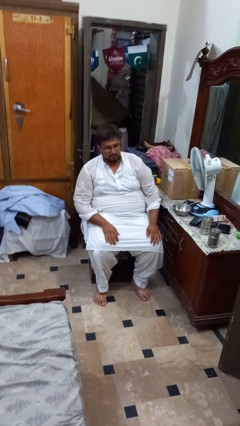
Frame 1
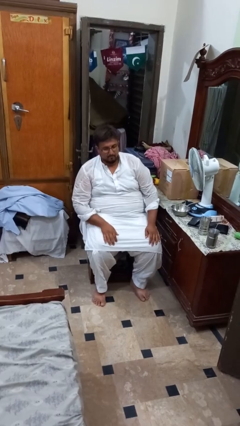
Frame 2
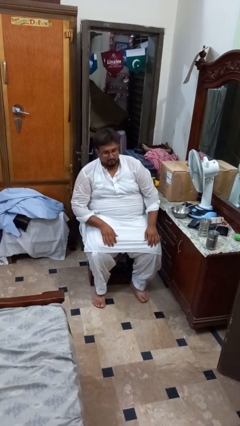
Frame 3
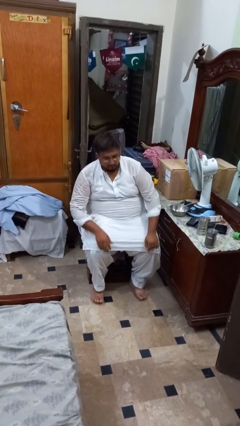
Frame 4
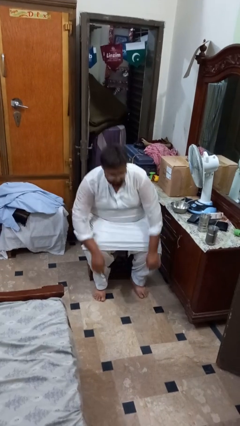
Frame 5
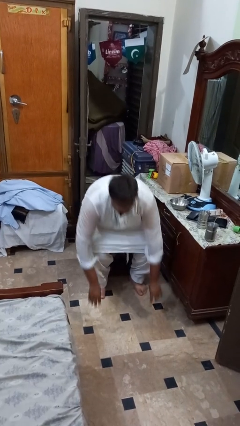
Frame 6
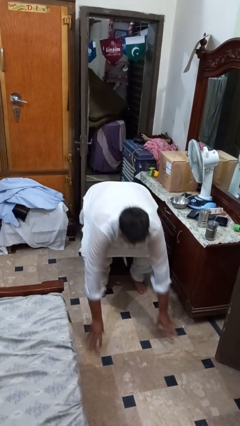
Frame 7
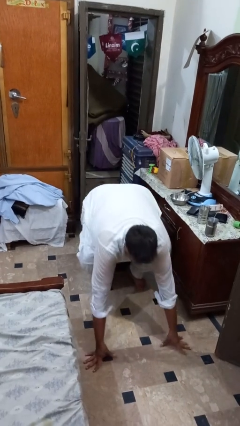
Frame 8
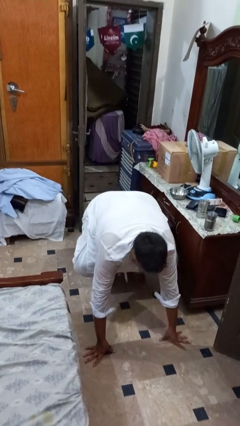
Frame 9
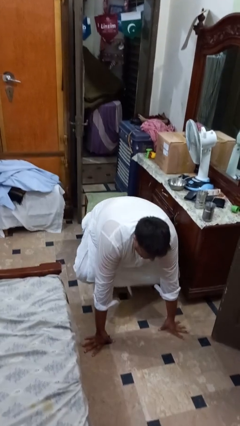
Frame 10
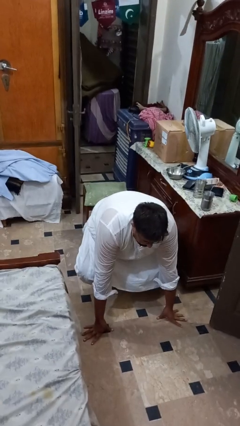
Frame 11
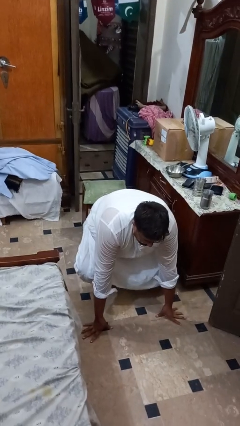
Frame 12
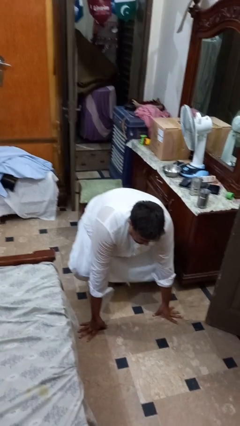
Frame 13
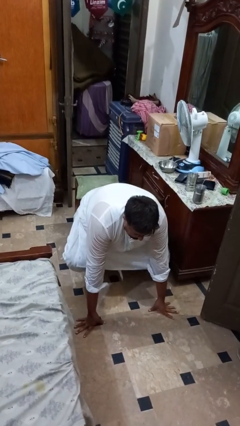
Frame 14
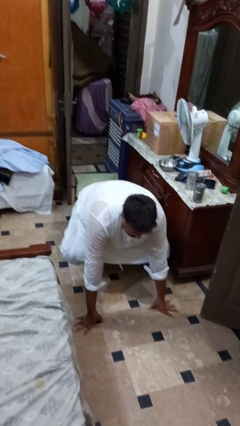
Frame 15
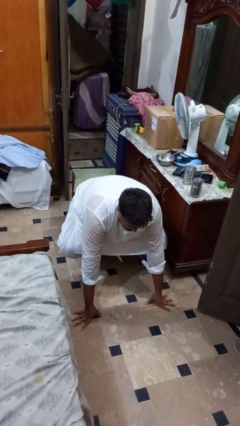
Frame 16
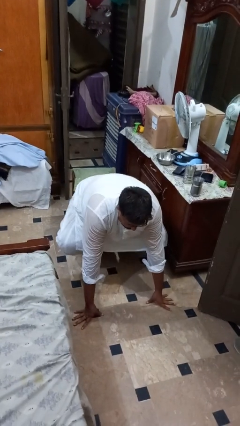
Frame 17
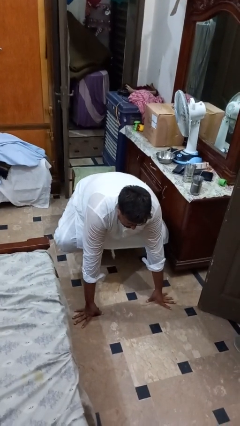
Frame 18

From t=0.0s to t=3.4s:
person falls from chair

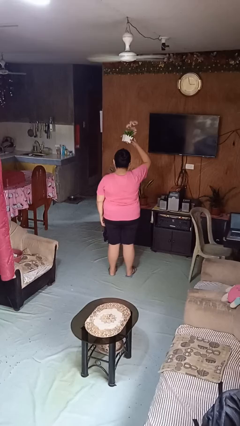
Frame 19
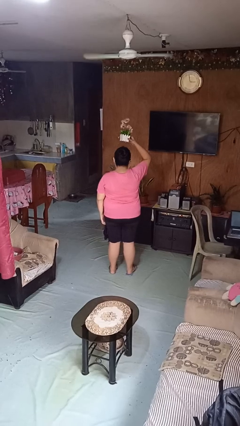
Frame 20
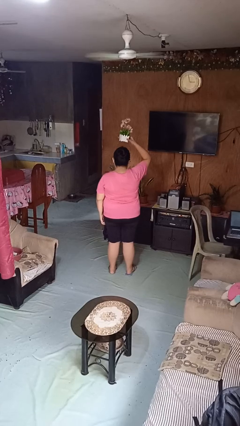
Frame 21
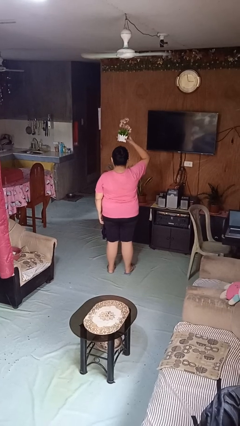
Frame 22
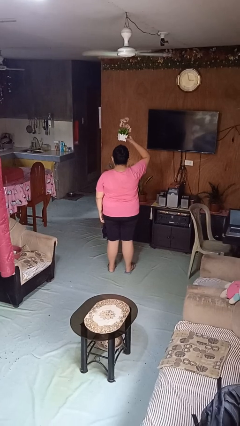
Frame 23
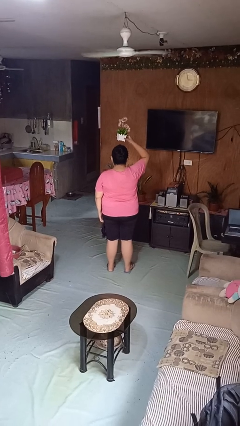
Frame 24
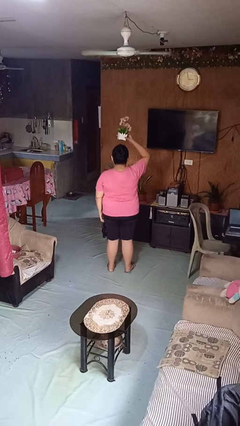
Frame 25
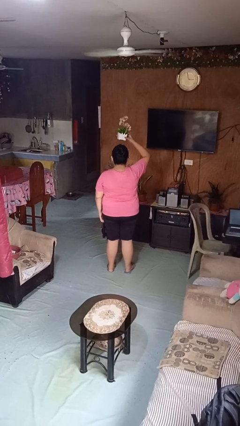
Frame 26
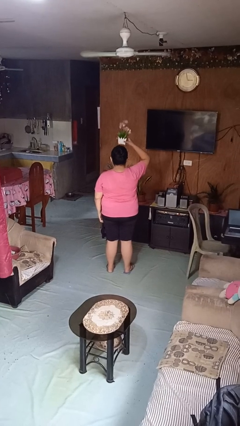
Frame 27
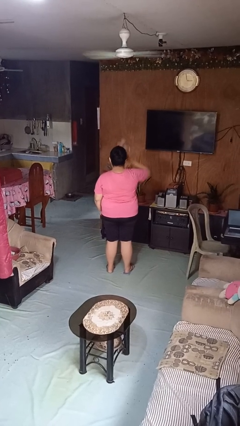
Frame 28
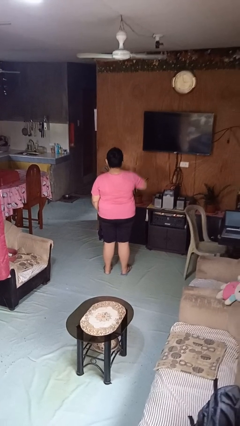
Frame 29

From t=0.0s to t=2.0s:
person holds object above head

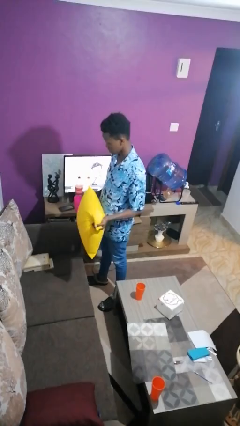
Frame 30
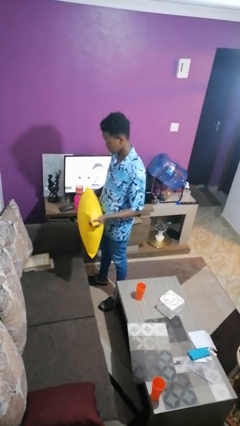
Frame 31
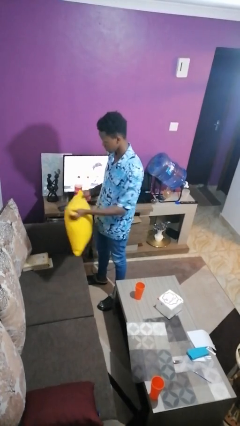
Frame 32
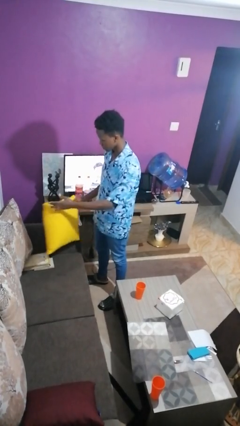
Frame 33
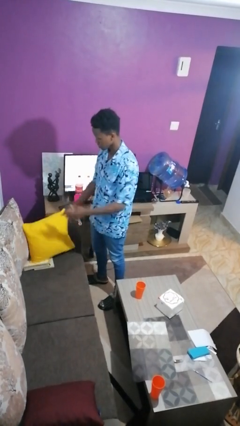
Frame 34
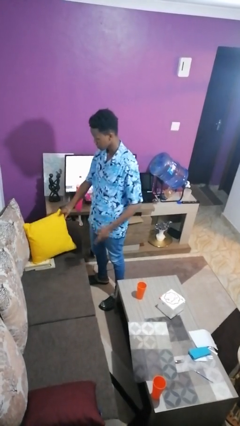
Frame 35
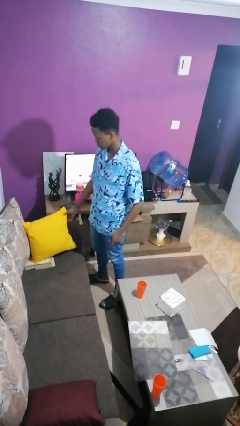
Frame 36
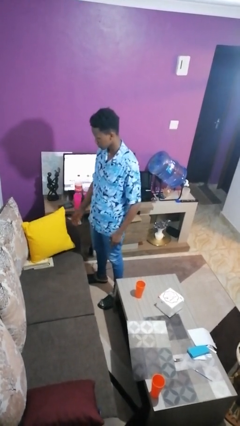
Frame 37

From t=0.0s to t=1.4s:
person puts down object on couch

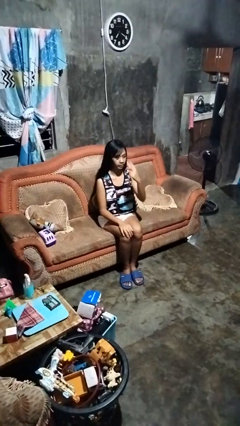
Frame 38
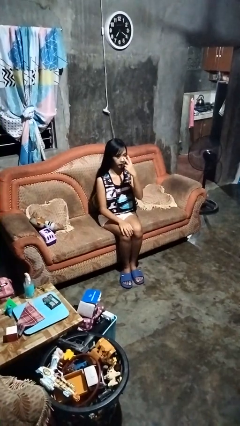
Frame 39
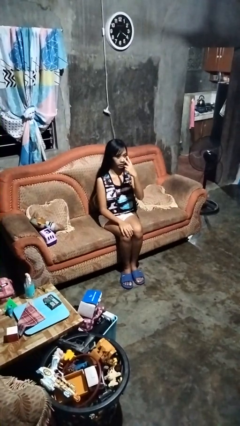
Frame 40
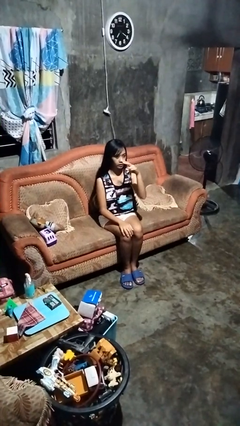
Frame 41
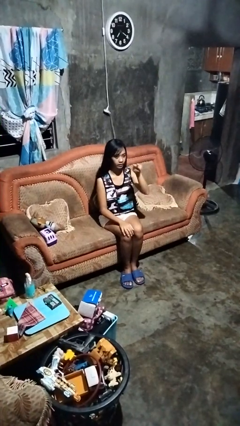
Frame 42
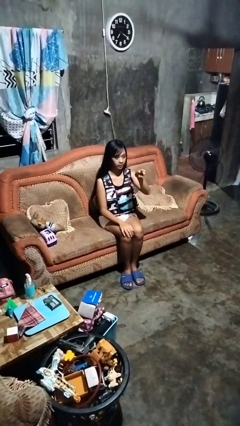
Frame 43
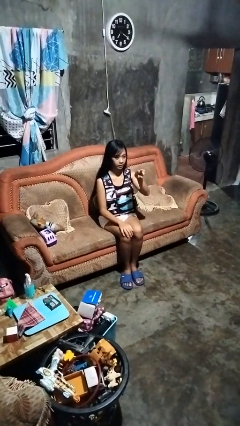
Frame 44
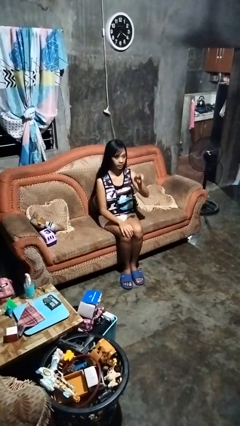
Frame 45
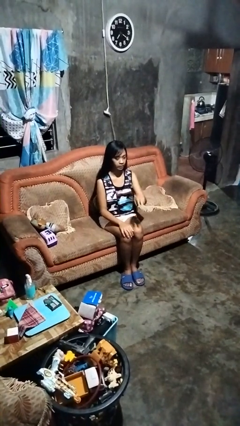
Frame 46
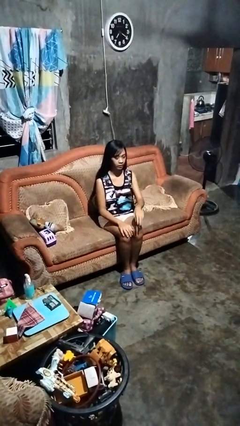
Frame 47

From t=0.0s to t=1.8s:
person gestures watch closely

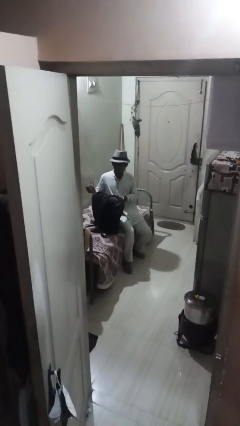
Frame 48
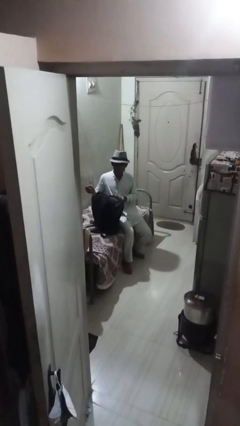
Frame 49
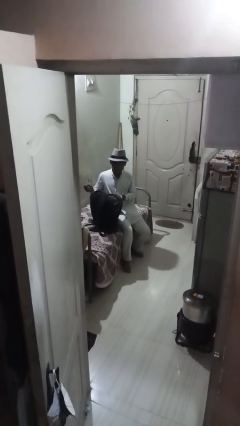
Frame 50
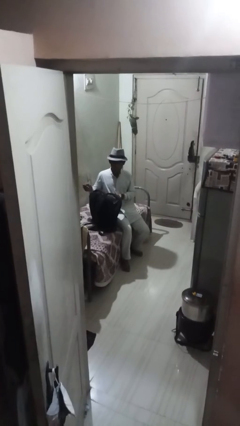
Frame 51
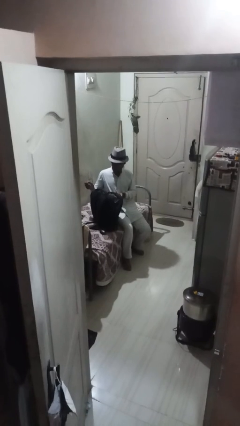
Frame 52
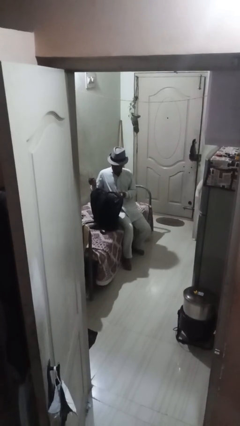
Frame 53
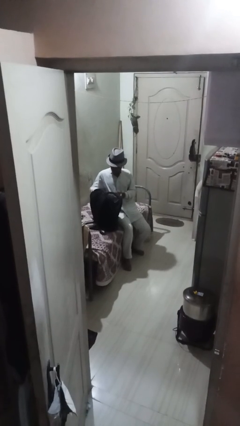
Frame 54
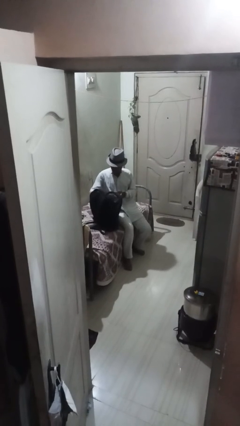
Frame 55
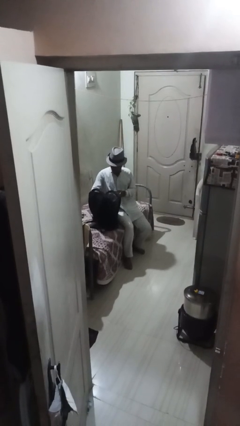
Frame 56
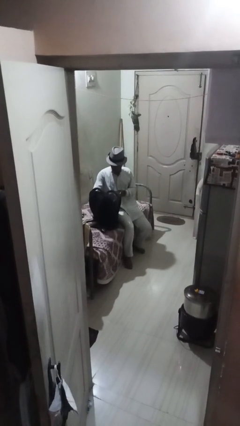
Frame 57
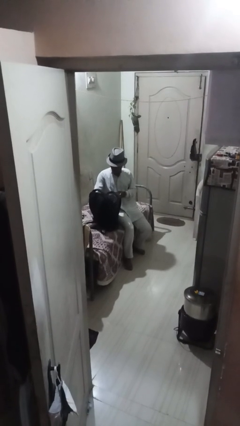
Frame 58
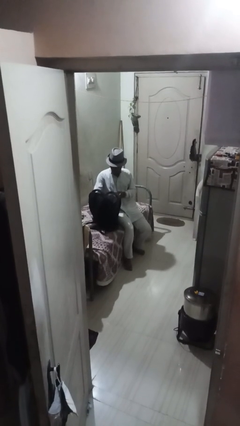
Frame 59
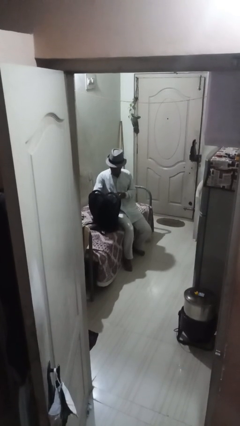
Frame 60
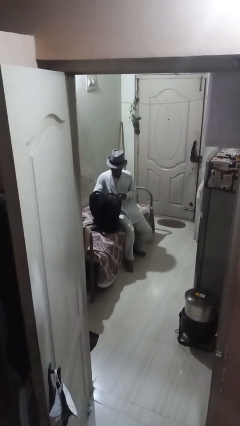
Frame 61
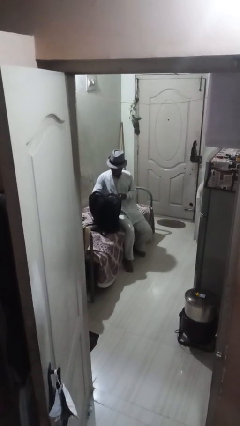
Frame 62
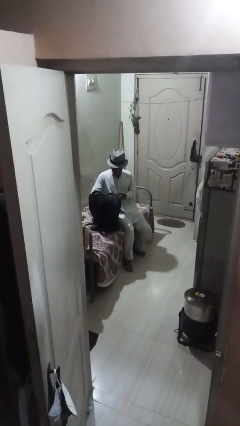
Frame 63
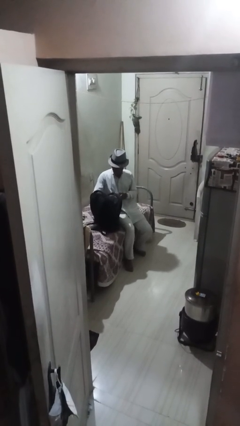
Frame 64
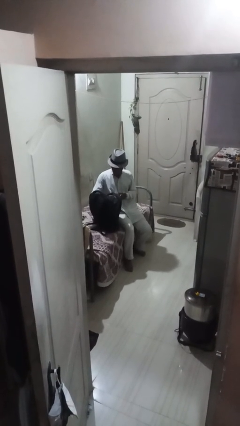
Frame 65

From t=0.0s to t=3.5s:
person searches in backpack

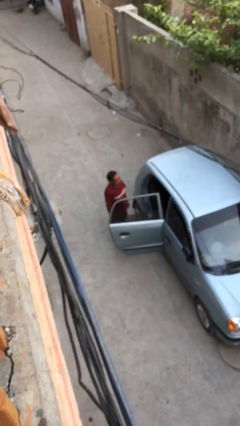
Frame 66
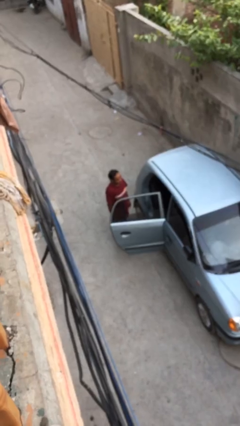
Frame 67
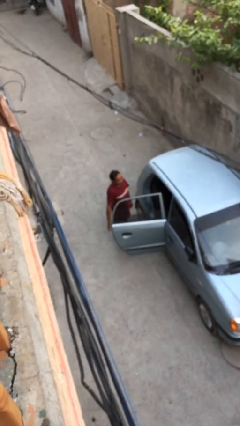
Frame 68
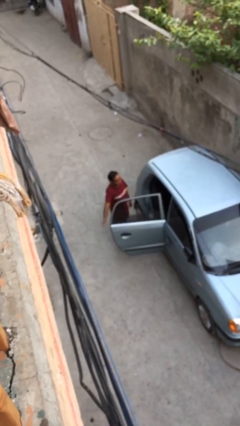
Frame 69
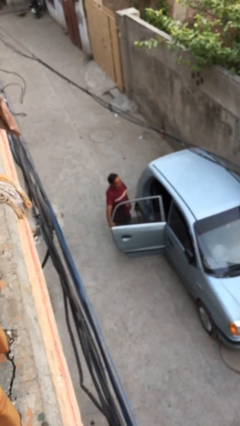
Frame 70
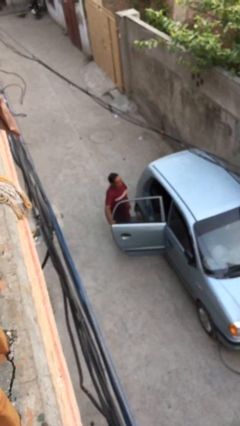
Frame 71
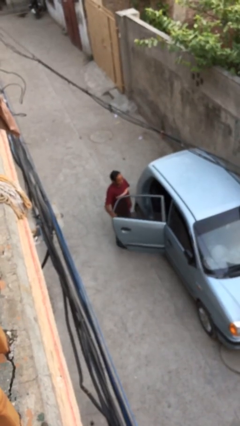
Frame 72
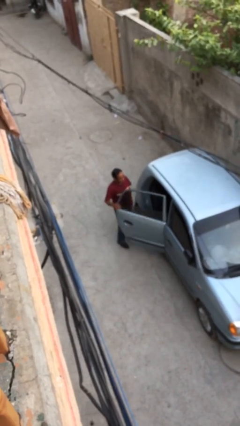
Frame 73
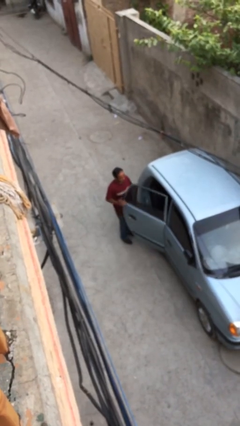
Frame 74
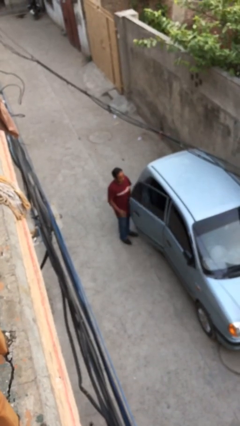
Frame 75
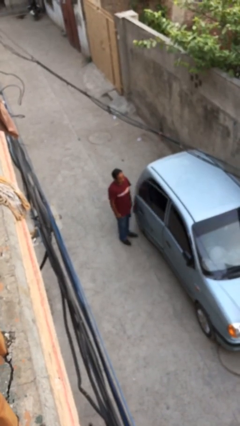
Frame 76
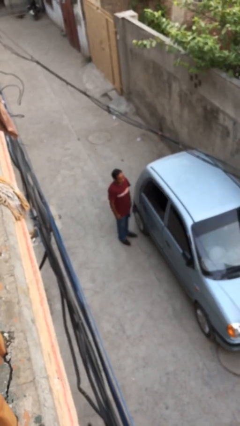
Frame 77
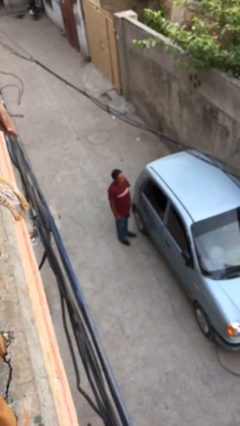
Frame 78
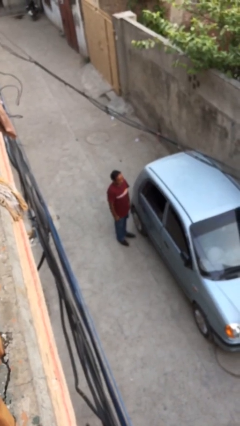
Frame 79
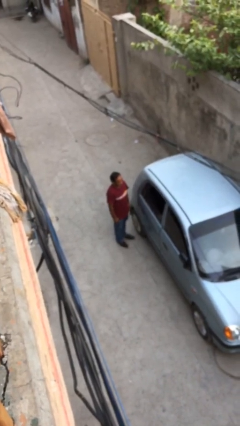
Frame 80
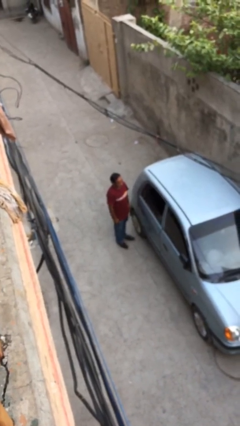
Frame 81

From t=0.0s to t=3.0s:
person closes car door

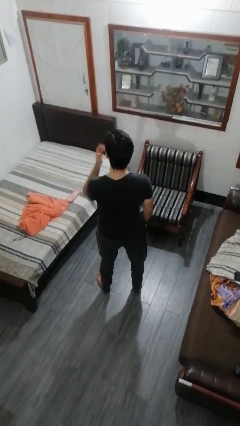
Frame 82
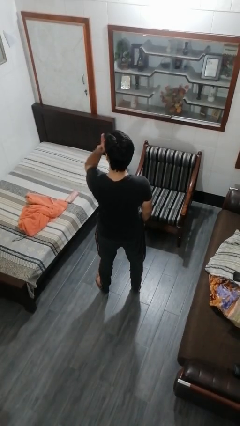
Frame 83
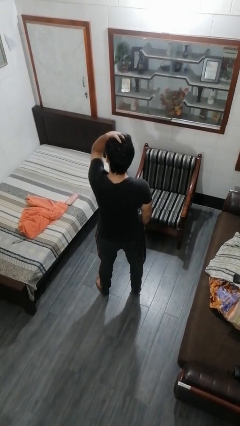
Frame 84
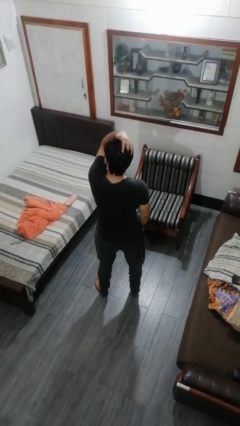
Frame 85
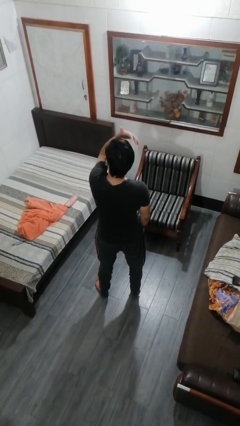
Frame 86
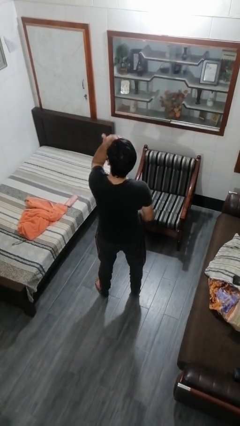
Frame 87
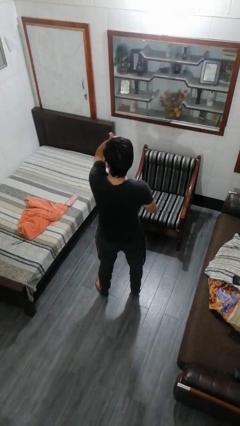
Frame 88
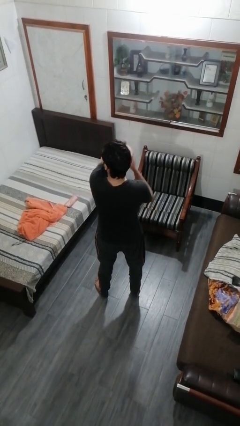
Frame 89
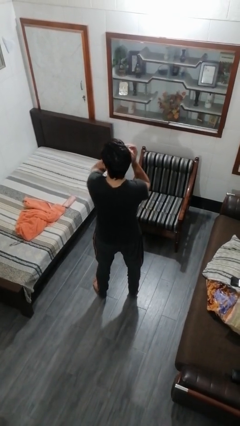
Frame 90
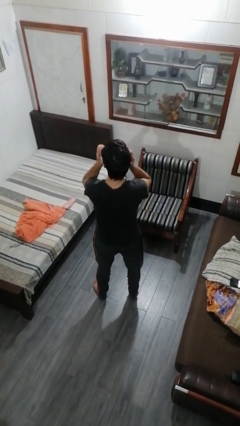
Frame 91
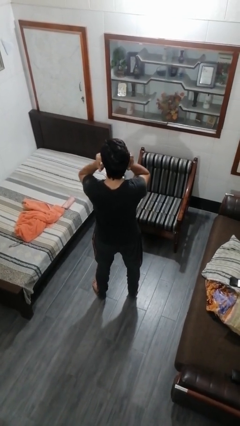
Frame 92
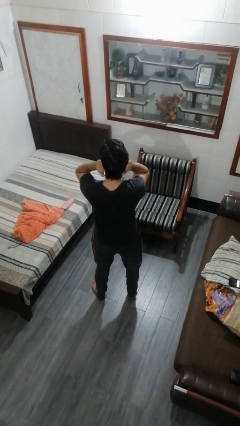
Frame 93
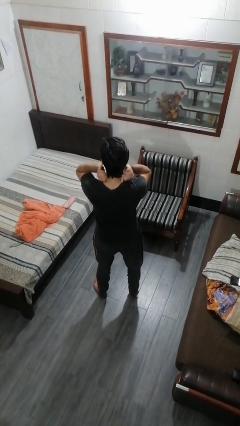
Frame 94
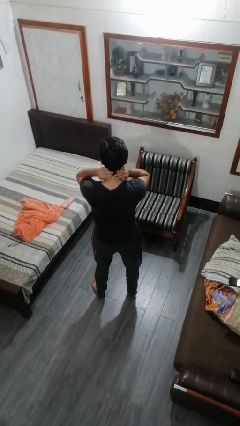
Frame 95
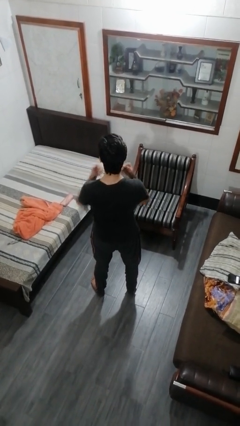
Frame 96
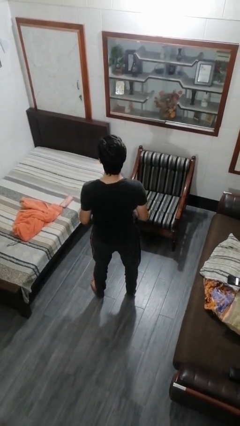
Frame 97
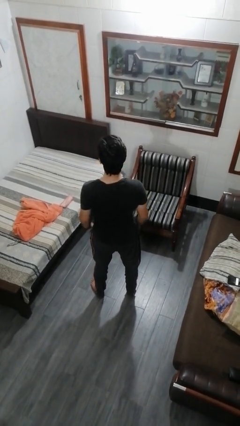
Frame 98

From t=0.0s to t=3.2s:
person strokes hair
